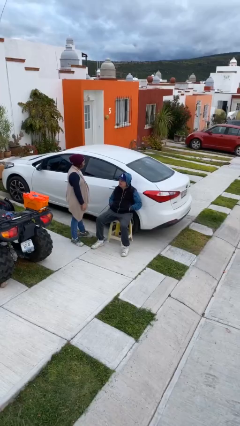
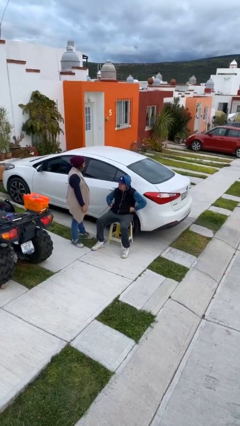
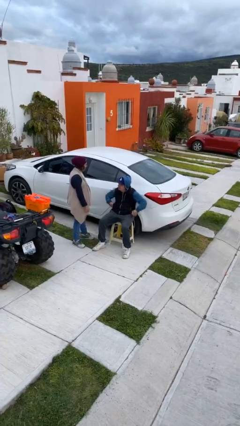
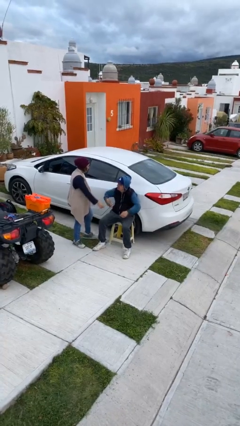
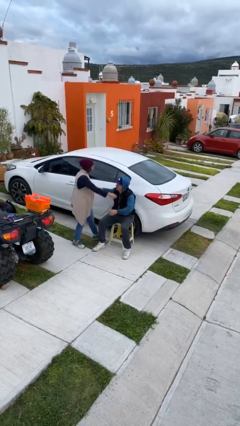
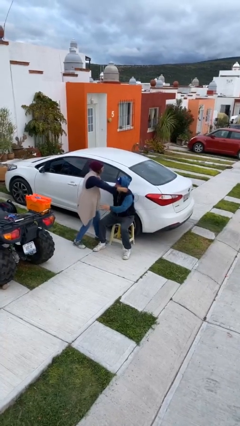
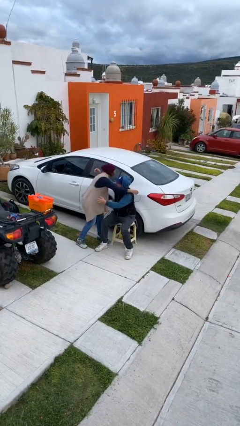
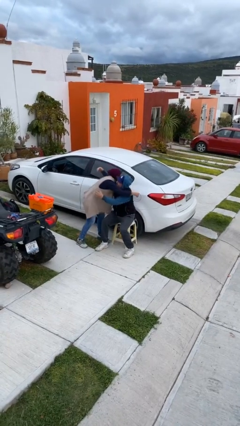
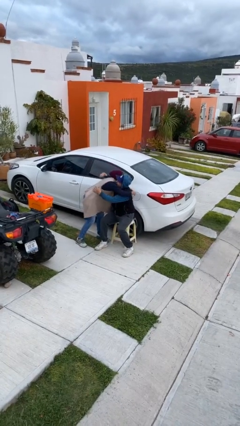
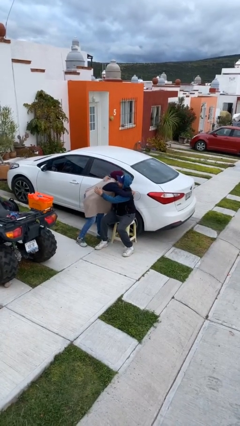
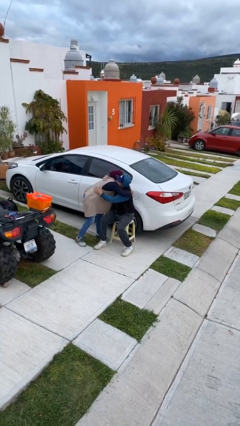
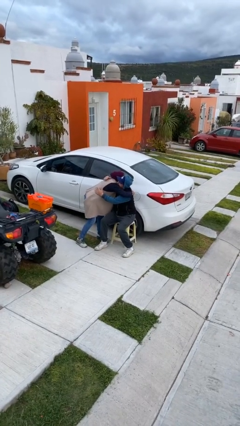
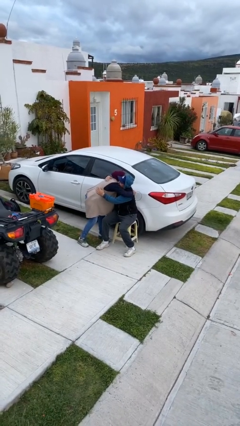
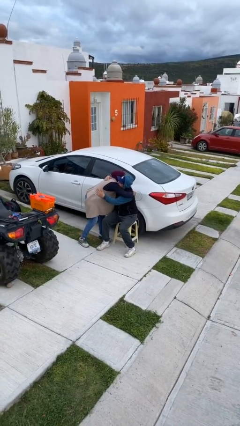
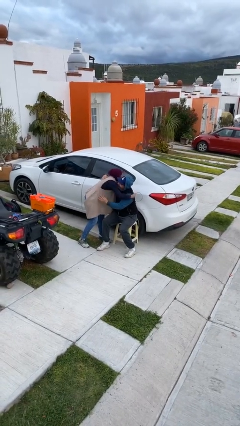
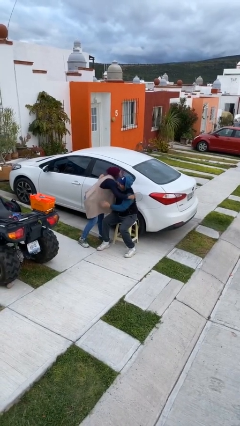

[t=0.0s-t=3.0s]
person embraces person

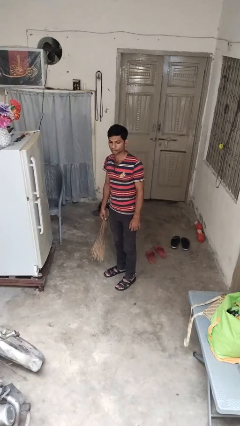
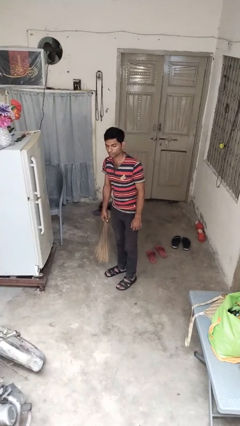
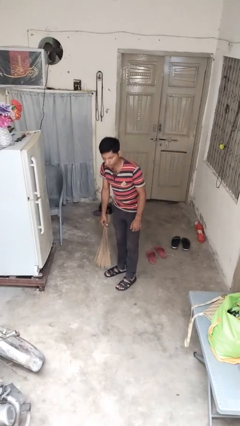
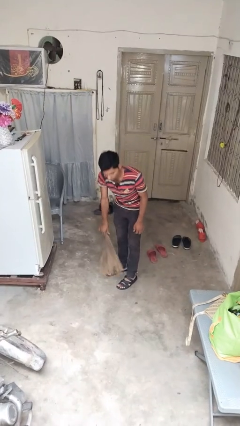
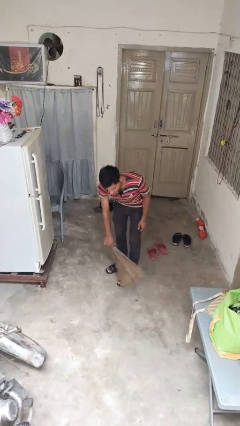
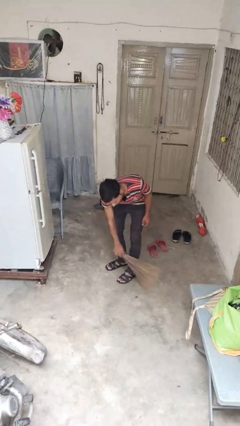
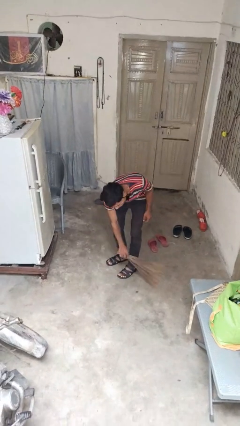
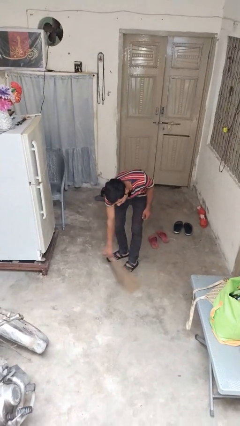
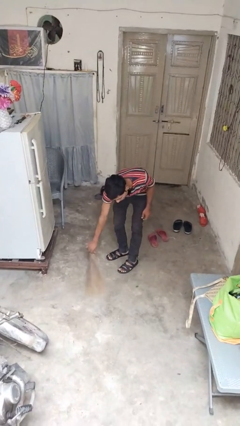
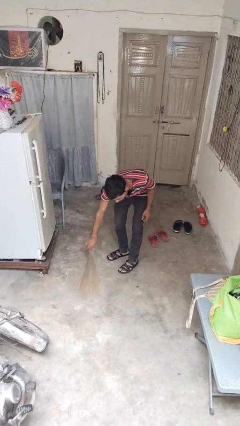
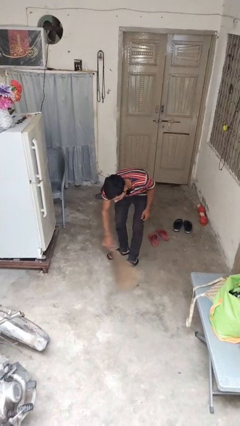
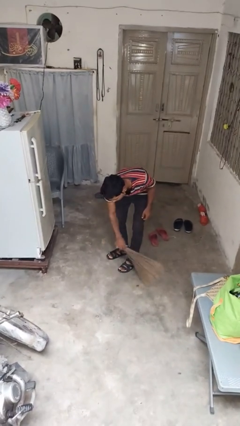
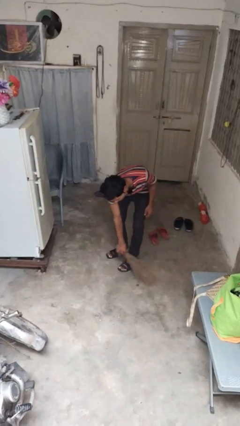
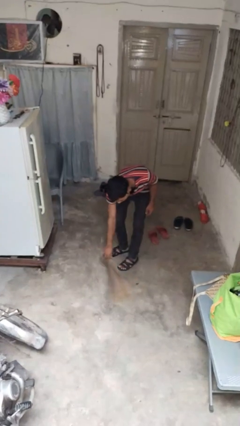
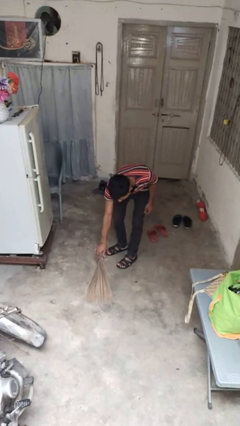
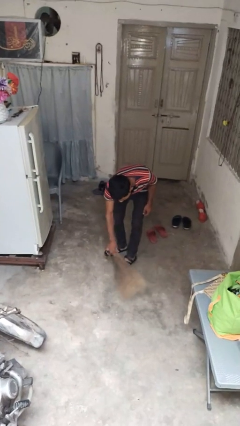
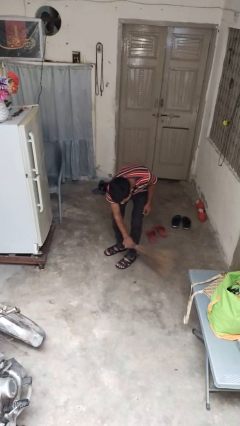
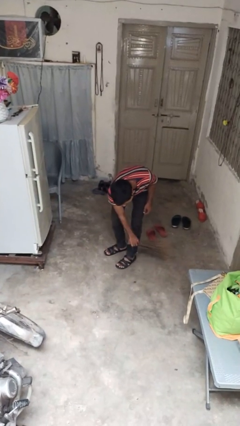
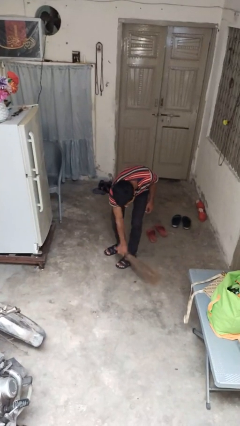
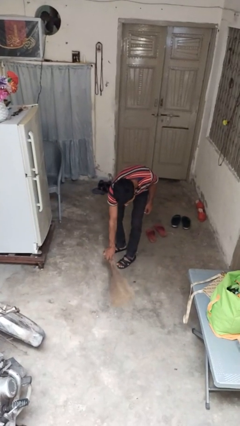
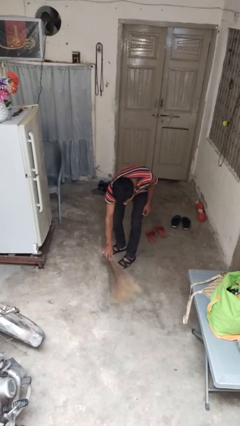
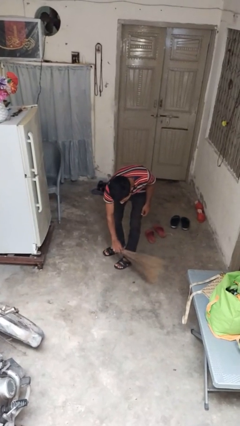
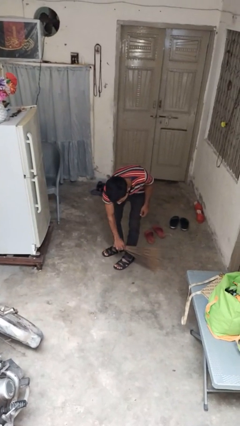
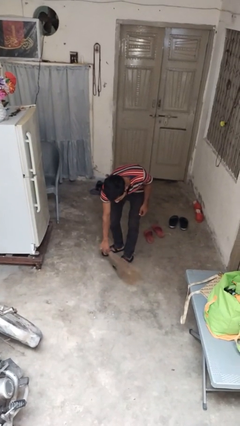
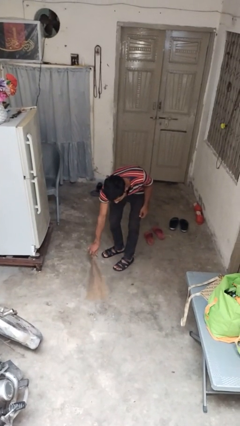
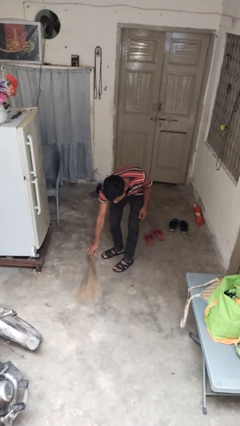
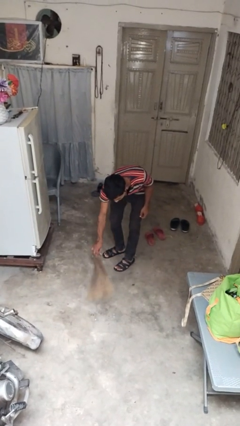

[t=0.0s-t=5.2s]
person sweeps floor

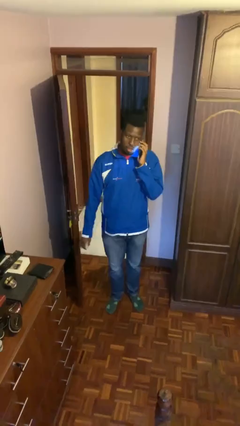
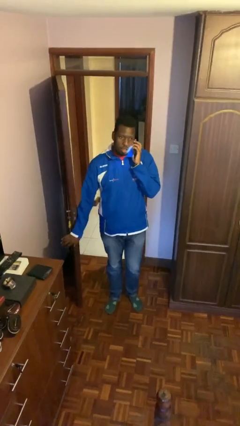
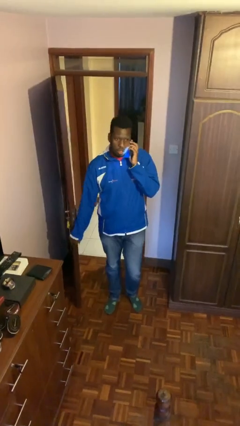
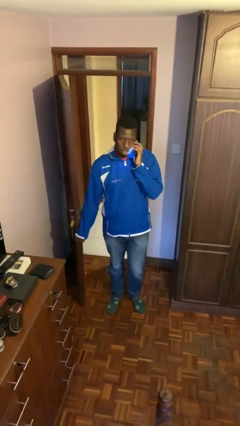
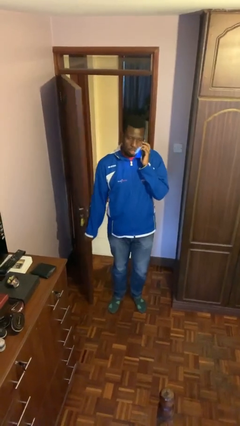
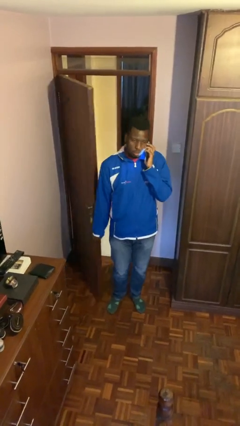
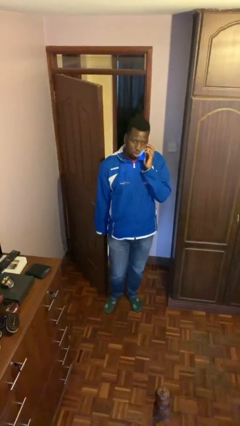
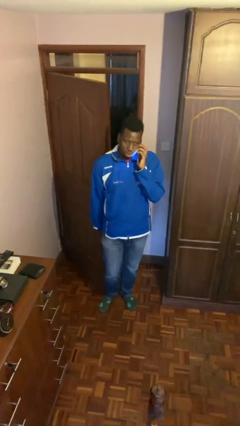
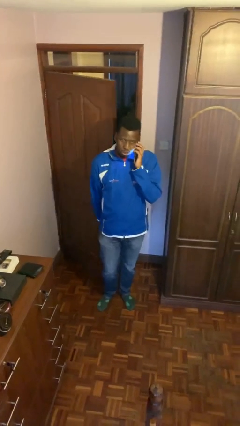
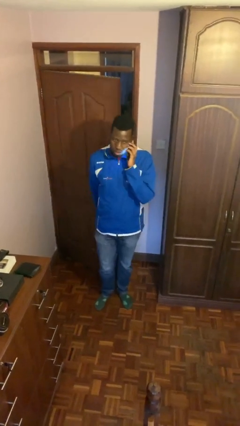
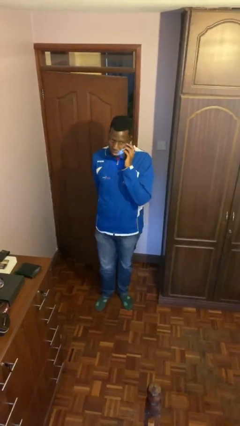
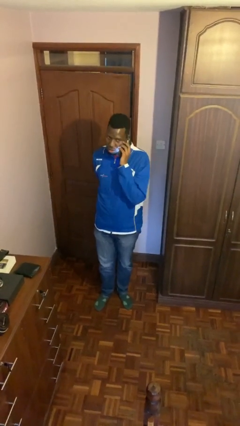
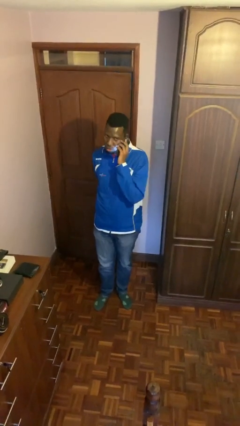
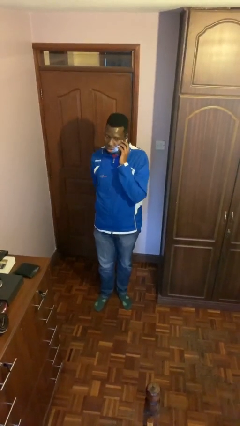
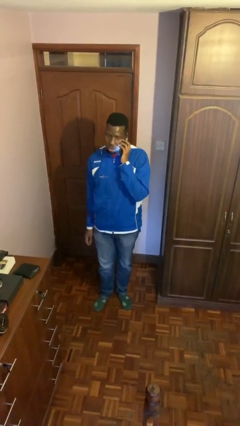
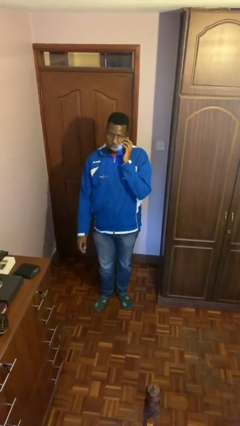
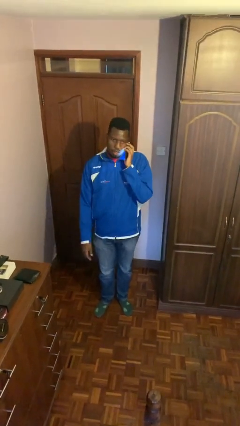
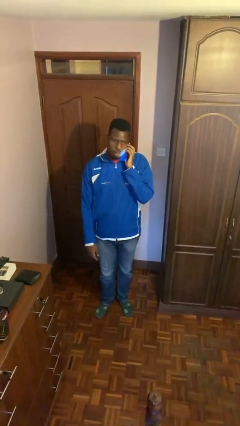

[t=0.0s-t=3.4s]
person closes facility door

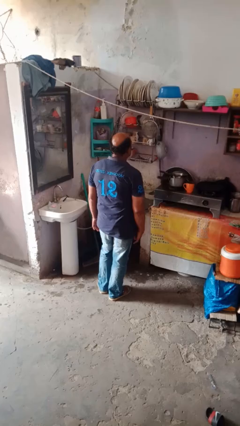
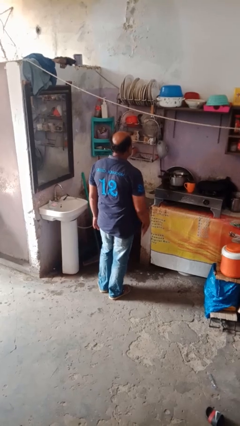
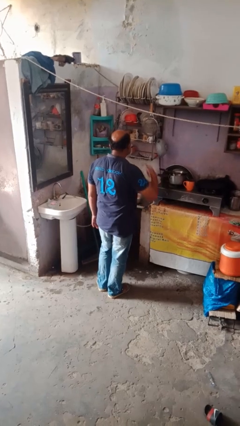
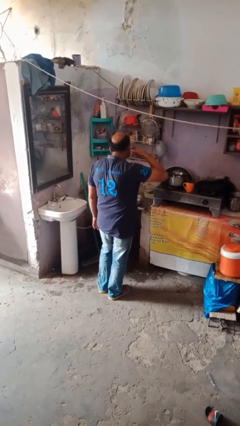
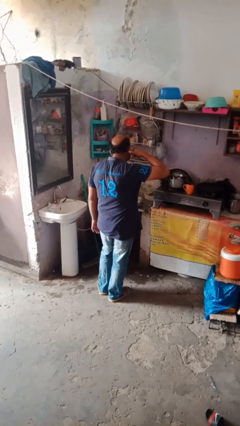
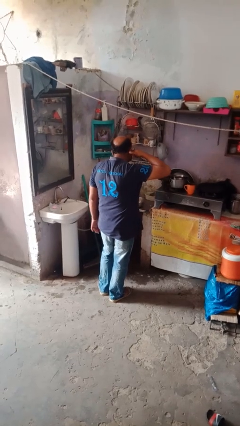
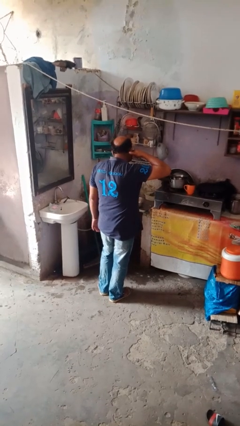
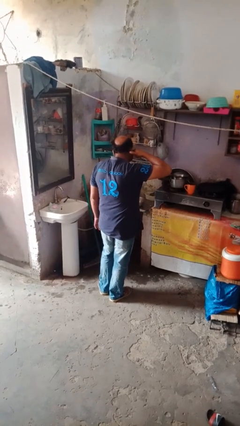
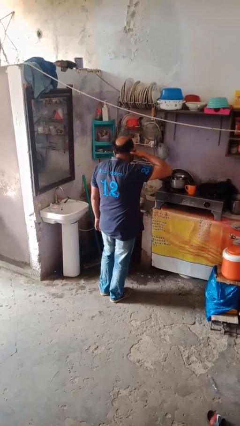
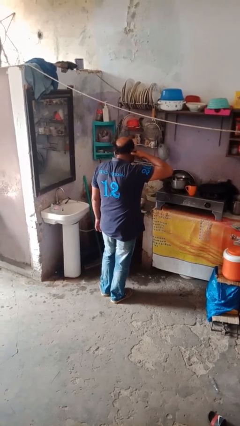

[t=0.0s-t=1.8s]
person gestures call me

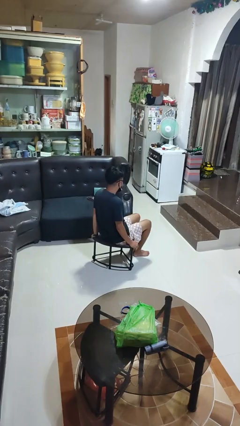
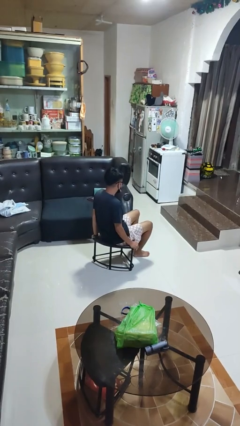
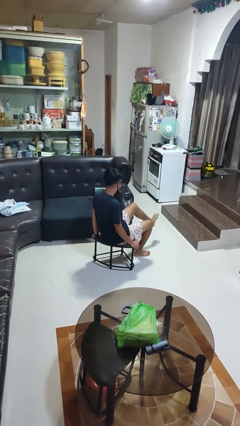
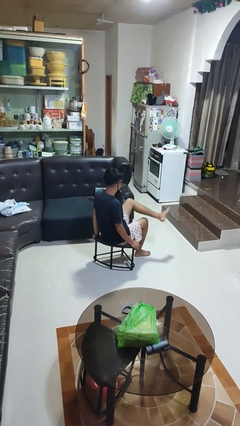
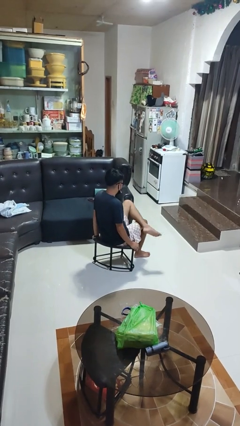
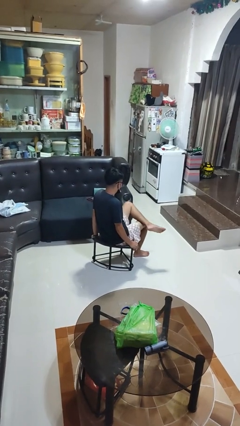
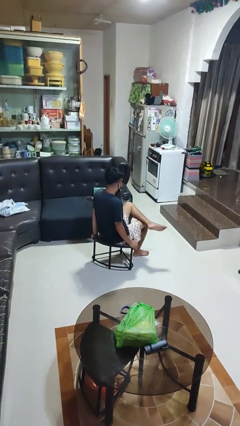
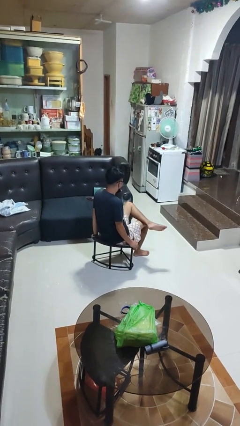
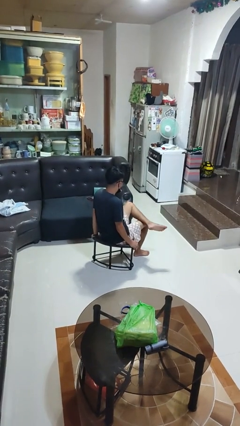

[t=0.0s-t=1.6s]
person crosses legs

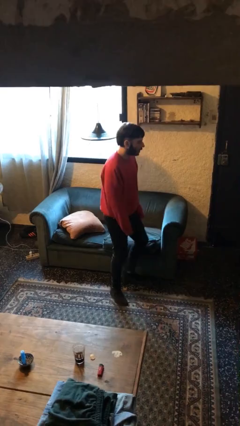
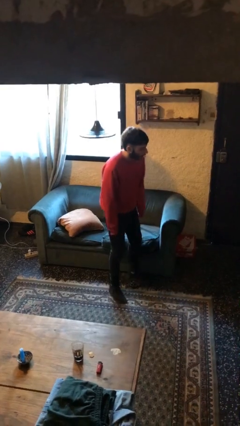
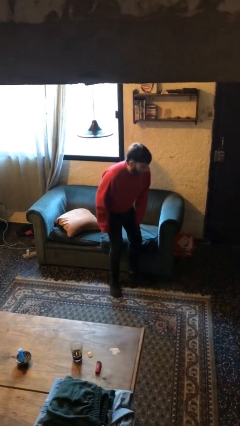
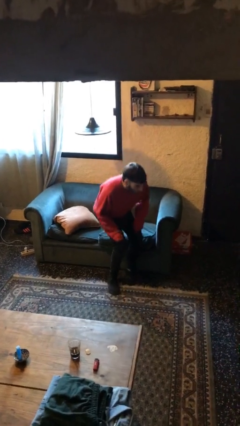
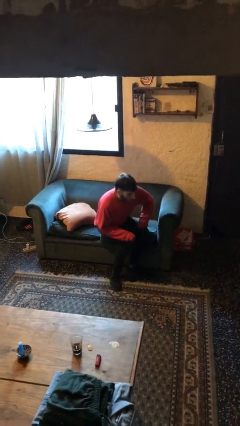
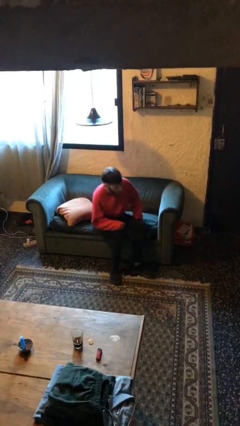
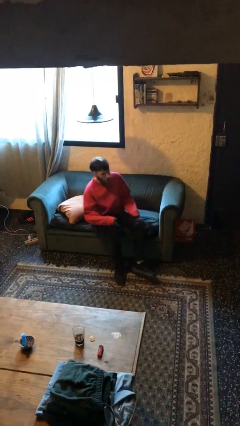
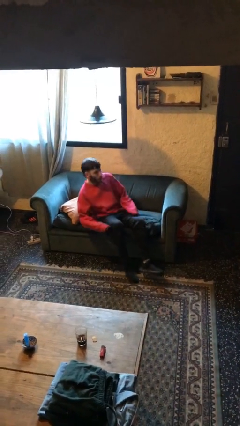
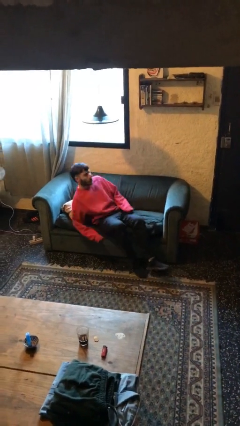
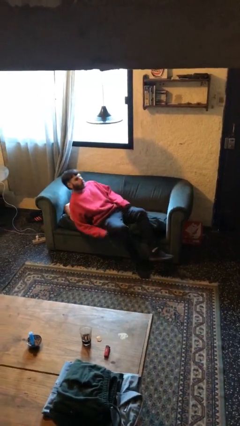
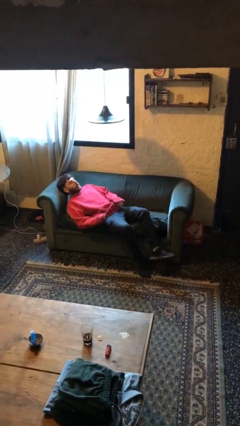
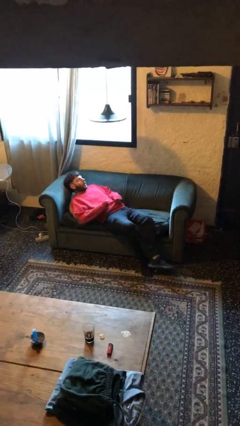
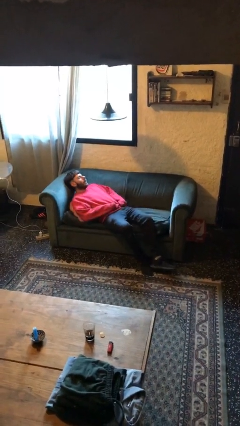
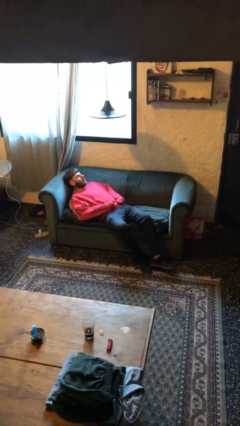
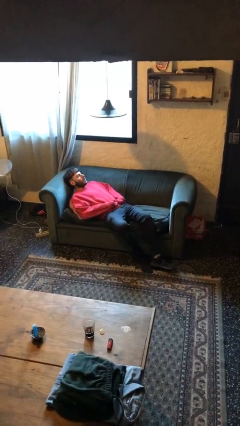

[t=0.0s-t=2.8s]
person lies down on couch
